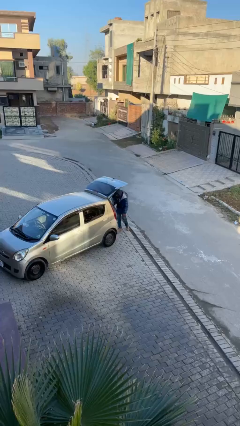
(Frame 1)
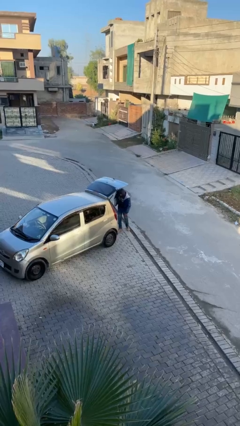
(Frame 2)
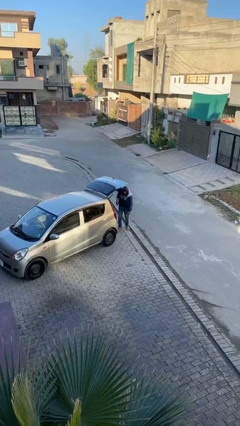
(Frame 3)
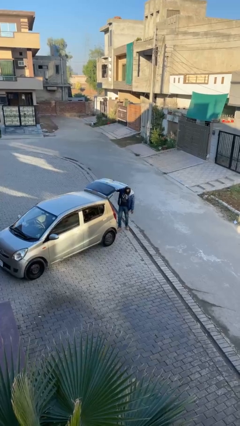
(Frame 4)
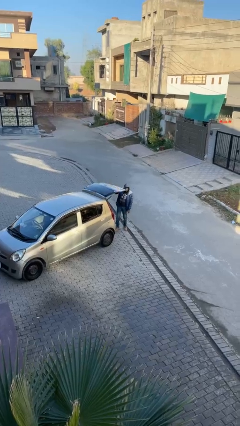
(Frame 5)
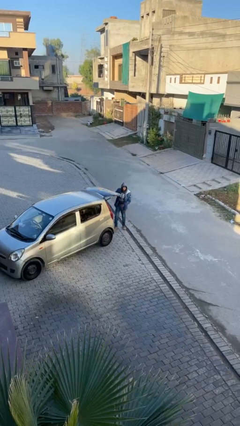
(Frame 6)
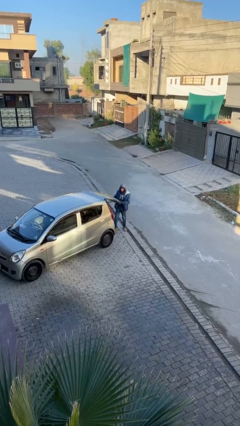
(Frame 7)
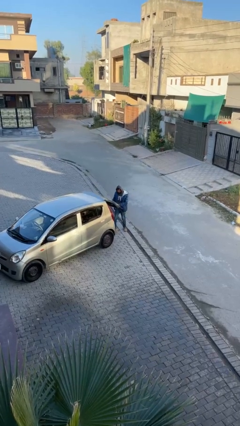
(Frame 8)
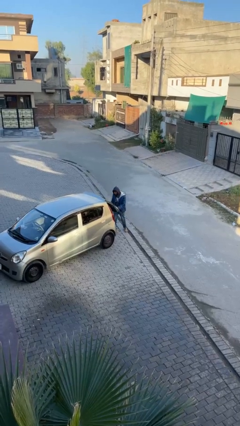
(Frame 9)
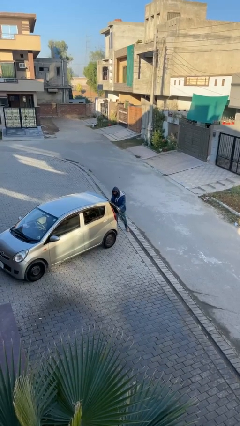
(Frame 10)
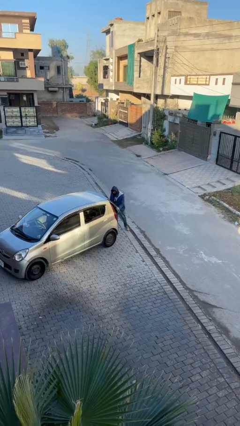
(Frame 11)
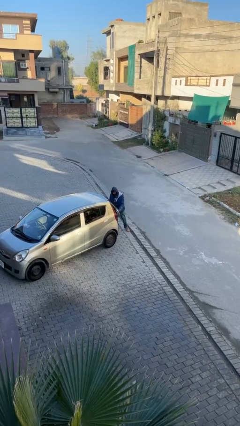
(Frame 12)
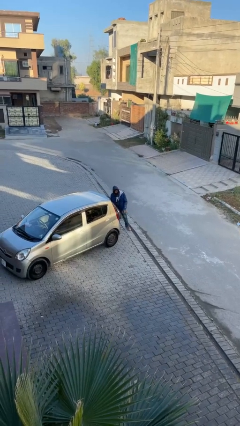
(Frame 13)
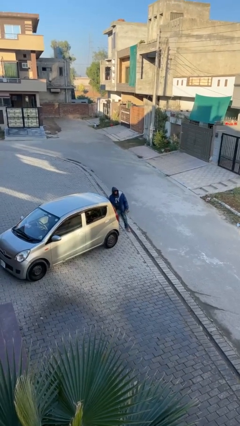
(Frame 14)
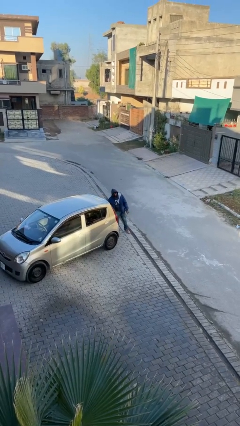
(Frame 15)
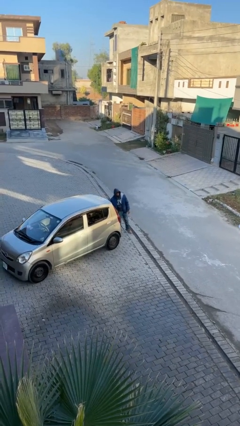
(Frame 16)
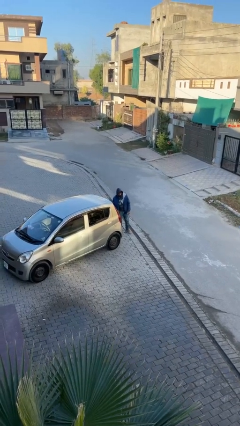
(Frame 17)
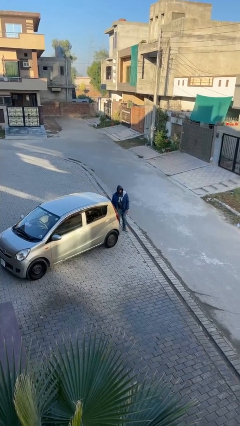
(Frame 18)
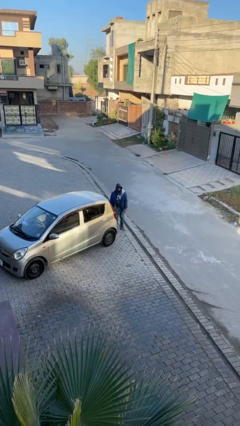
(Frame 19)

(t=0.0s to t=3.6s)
person closes car trunk

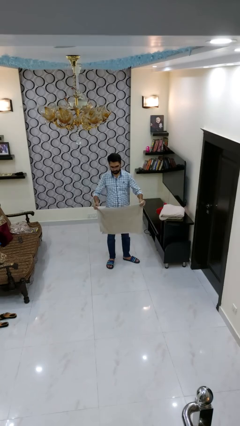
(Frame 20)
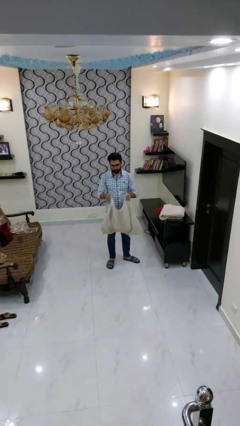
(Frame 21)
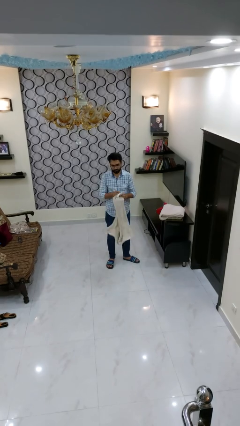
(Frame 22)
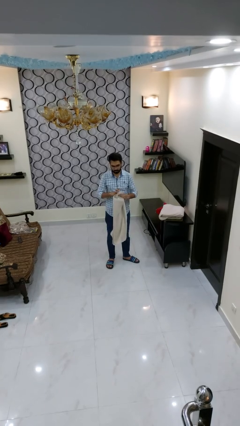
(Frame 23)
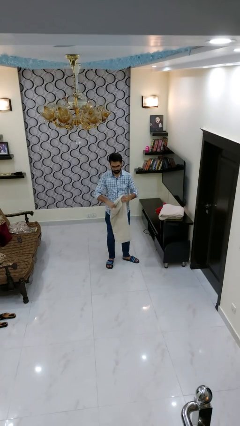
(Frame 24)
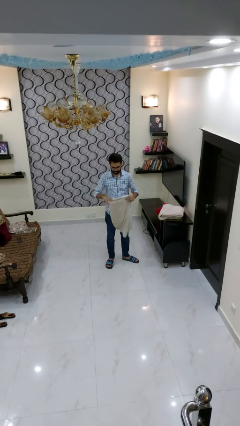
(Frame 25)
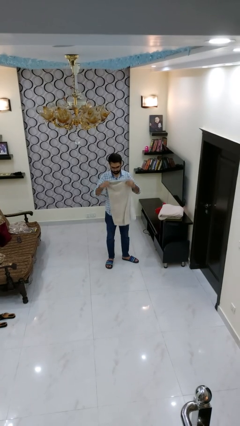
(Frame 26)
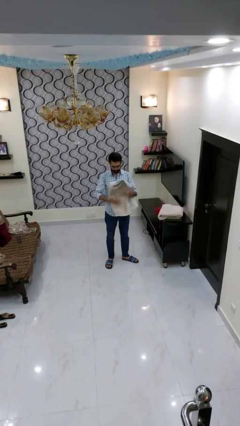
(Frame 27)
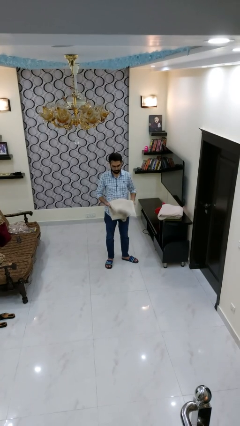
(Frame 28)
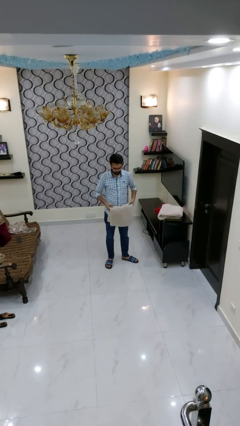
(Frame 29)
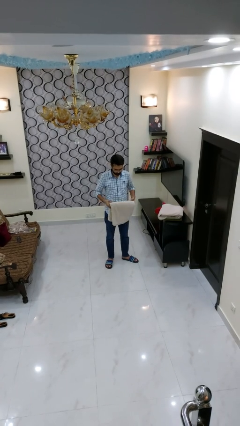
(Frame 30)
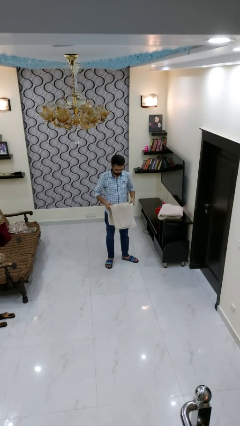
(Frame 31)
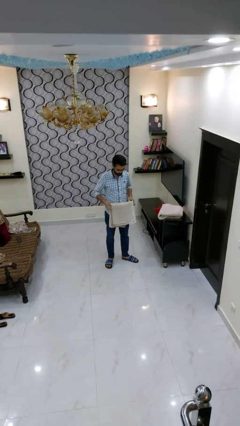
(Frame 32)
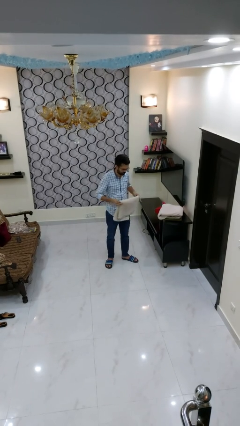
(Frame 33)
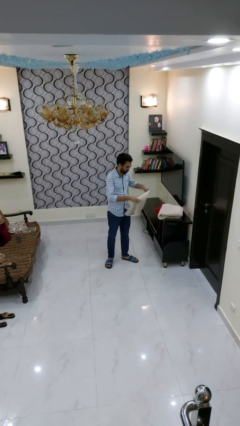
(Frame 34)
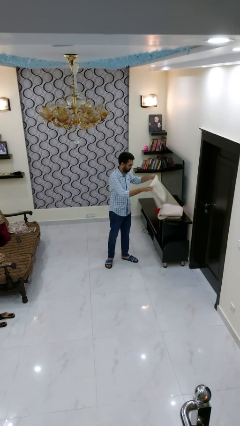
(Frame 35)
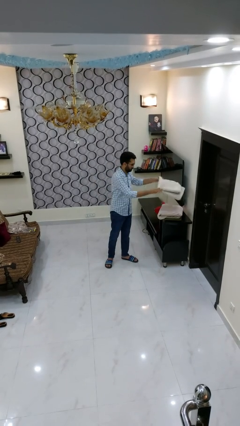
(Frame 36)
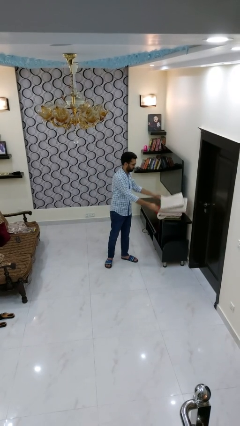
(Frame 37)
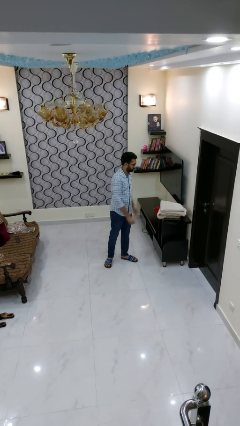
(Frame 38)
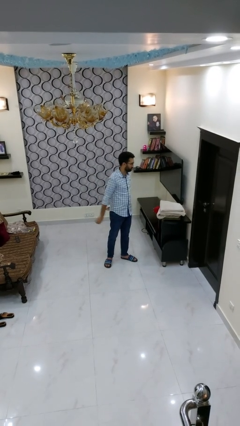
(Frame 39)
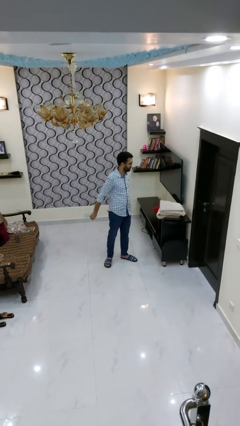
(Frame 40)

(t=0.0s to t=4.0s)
person folds towel

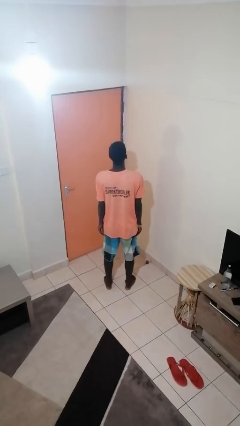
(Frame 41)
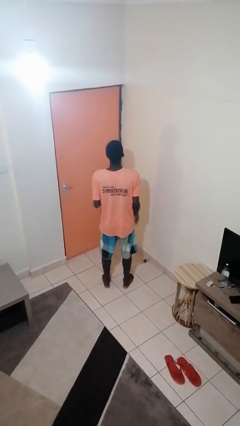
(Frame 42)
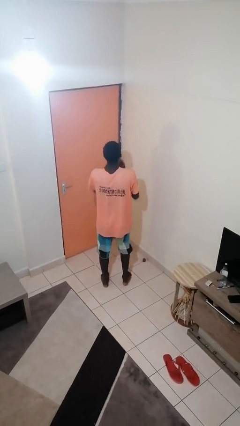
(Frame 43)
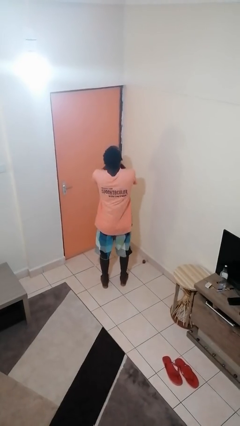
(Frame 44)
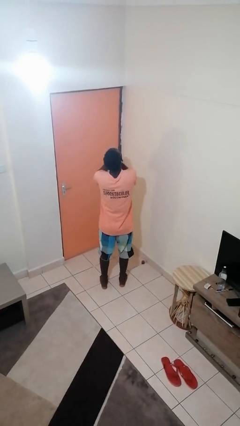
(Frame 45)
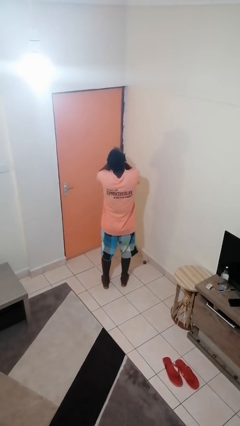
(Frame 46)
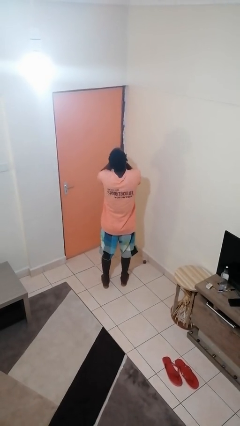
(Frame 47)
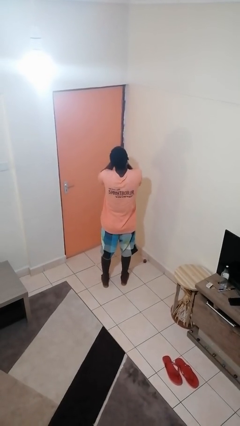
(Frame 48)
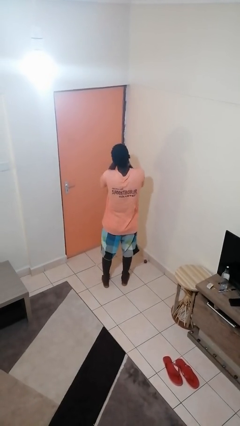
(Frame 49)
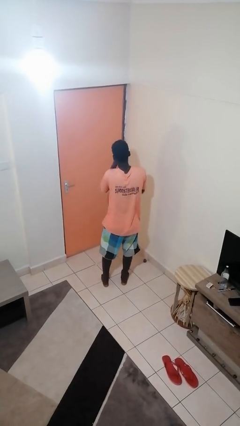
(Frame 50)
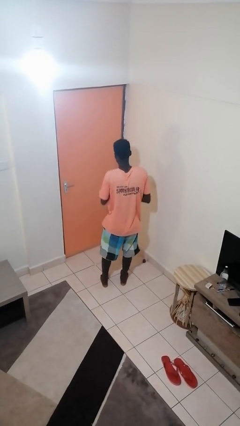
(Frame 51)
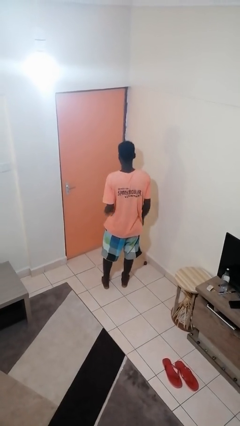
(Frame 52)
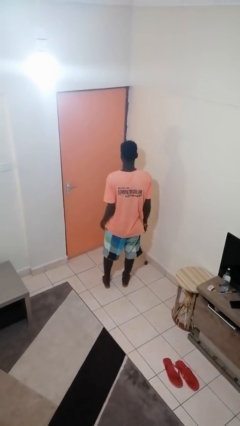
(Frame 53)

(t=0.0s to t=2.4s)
person yawns

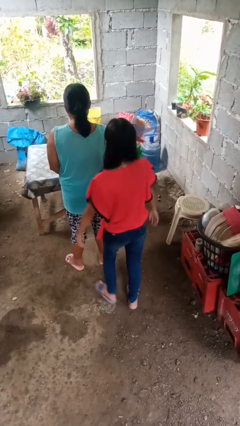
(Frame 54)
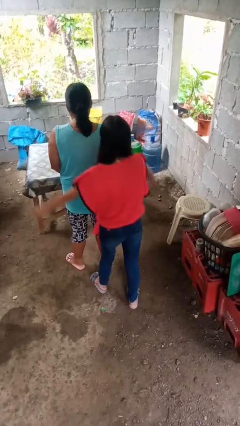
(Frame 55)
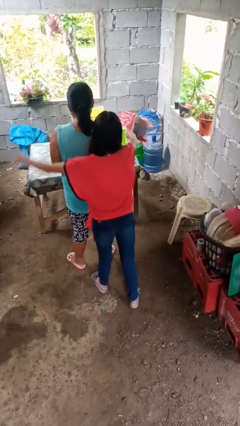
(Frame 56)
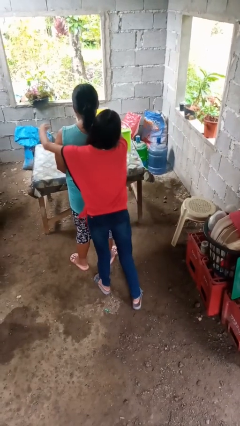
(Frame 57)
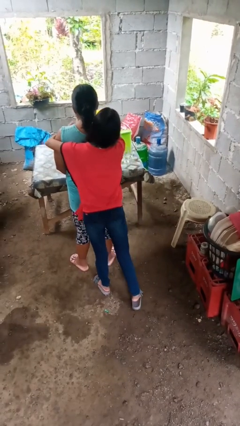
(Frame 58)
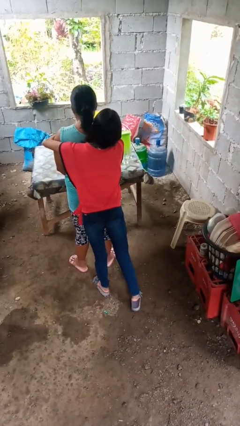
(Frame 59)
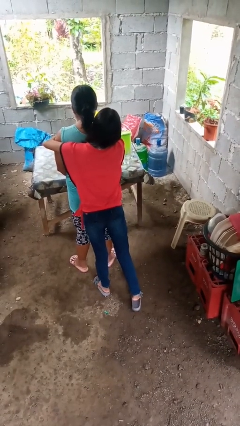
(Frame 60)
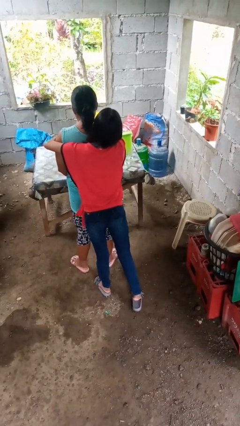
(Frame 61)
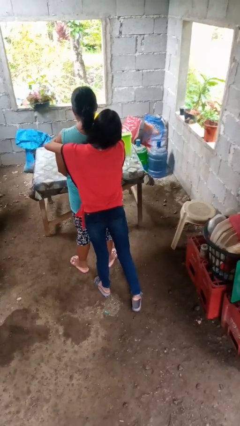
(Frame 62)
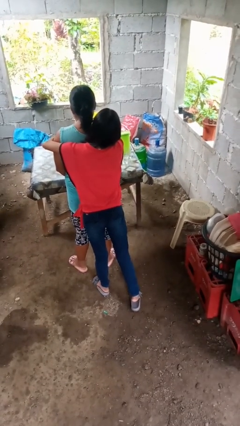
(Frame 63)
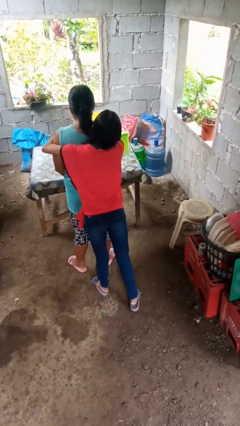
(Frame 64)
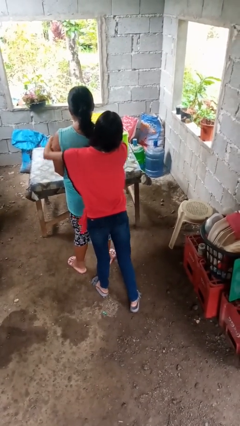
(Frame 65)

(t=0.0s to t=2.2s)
person hugs person from behind

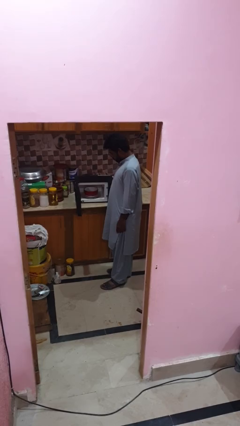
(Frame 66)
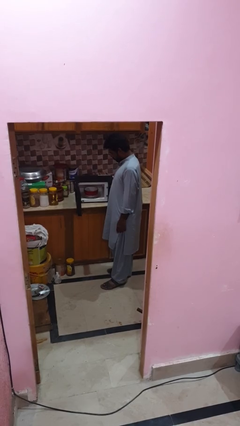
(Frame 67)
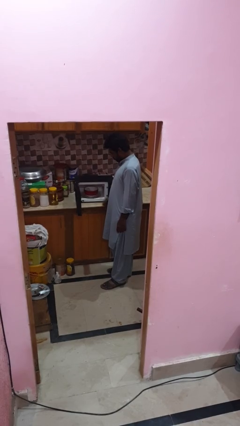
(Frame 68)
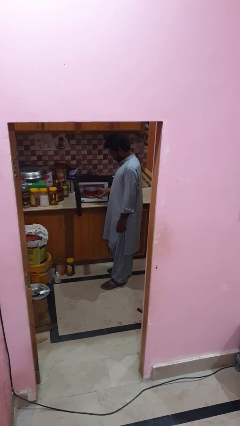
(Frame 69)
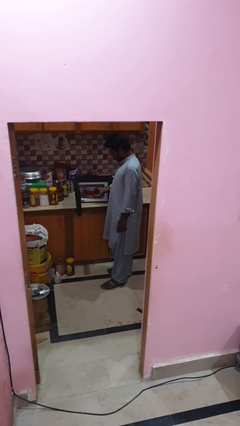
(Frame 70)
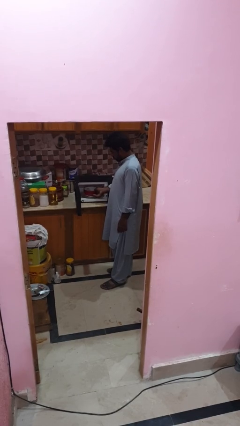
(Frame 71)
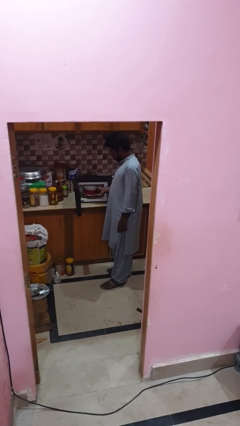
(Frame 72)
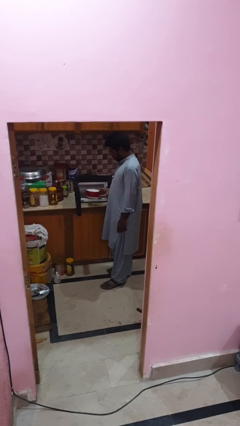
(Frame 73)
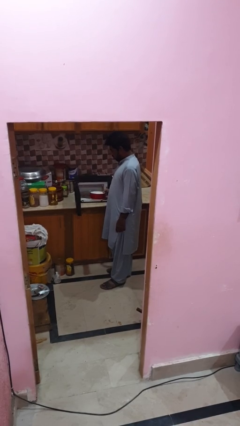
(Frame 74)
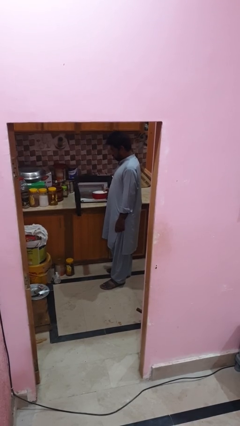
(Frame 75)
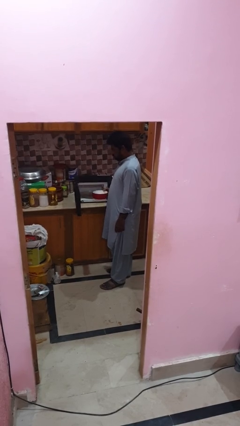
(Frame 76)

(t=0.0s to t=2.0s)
person takes object from microwave

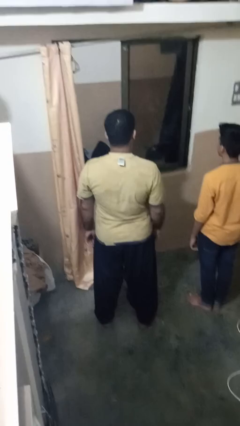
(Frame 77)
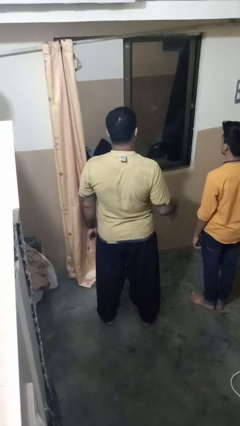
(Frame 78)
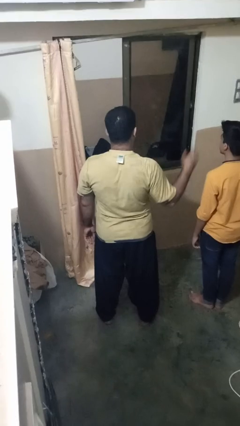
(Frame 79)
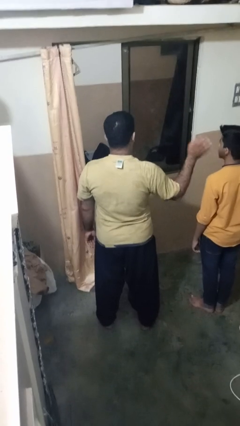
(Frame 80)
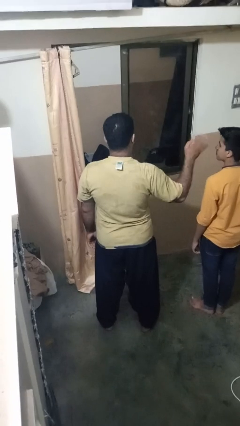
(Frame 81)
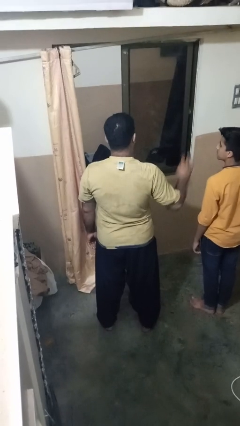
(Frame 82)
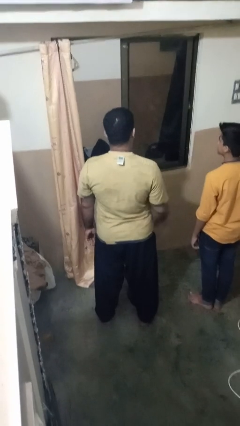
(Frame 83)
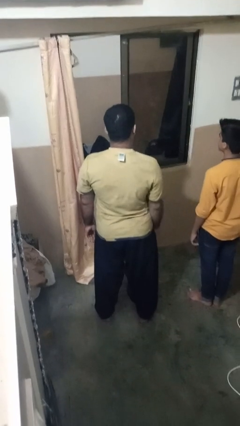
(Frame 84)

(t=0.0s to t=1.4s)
person waves at person

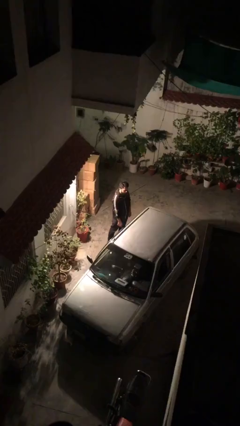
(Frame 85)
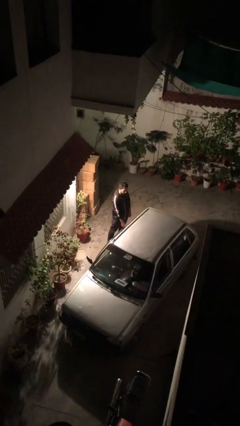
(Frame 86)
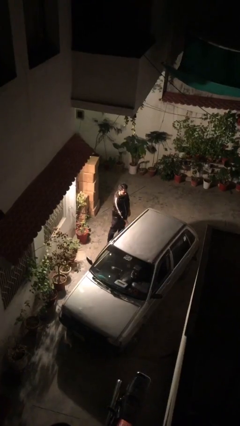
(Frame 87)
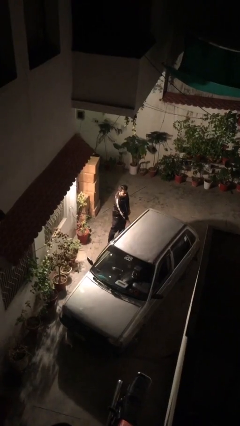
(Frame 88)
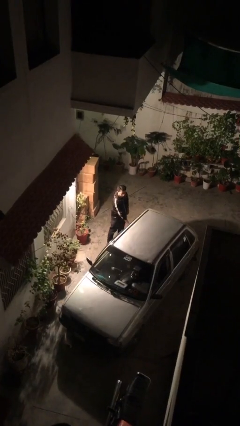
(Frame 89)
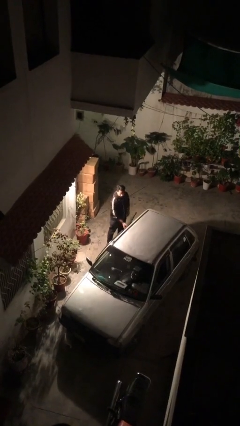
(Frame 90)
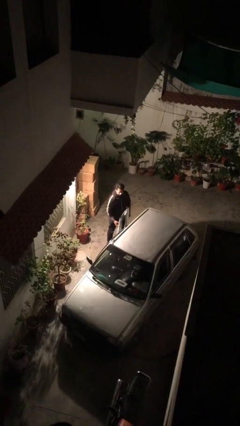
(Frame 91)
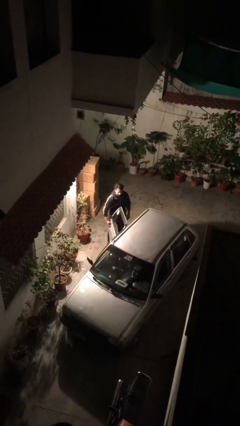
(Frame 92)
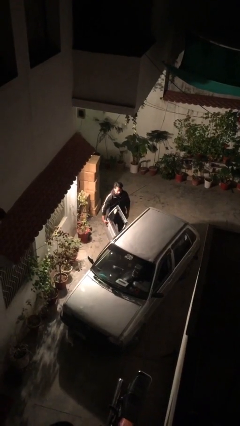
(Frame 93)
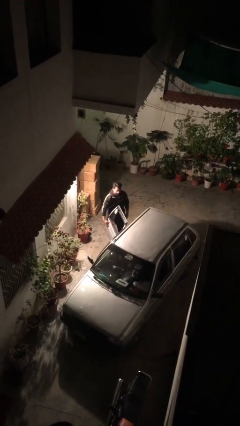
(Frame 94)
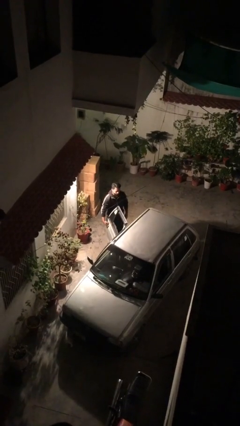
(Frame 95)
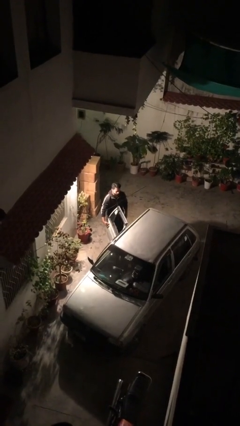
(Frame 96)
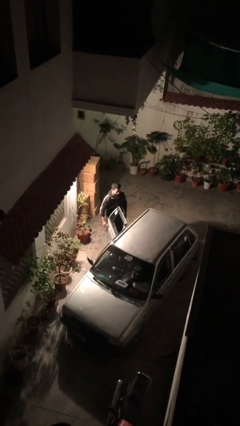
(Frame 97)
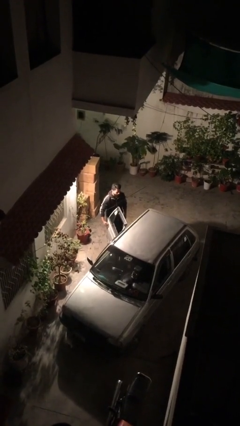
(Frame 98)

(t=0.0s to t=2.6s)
person opens car door
